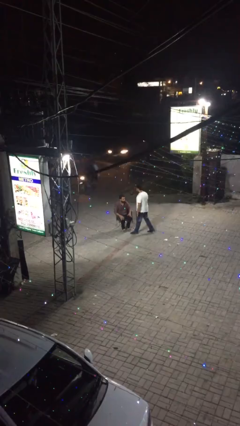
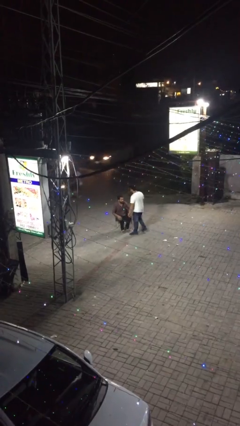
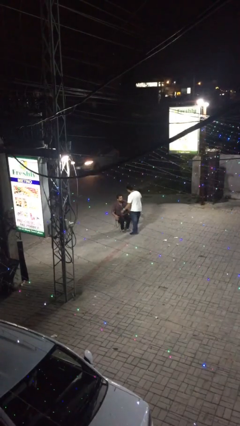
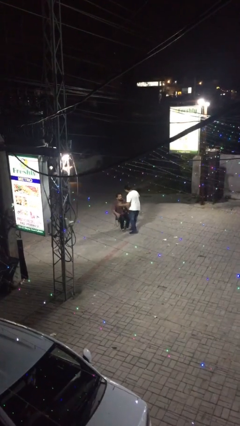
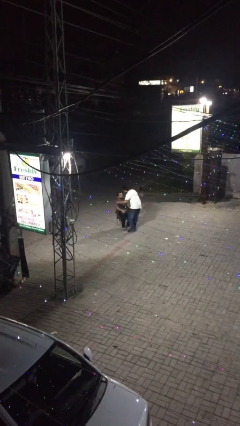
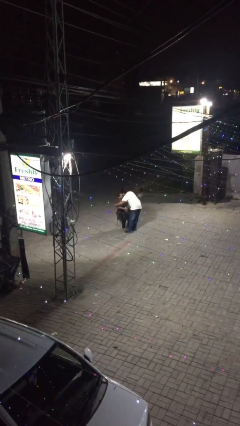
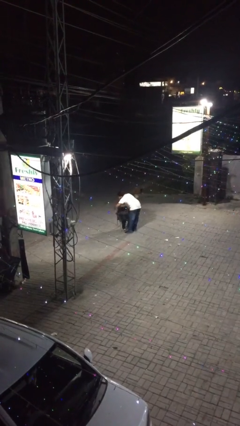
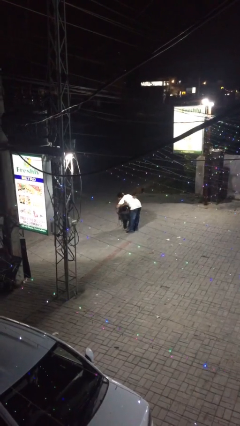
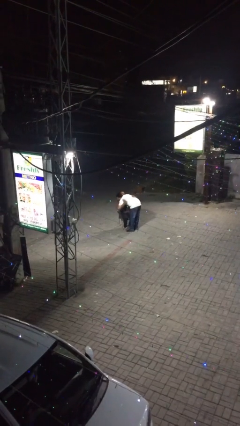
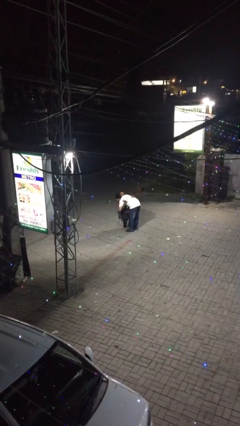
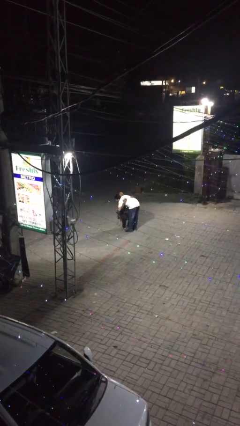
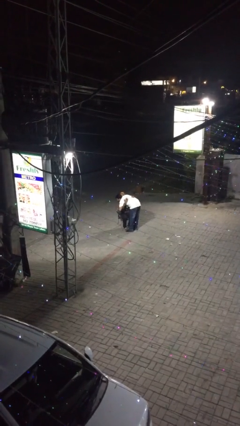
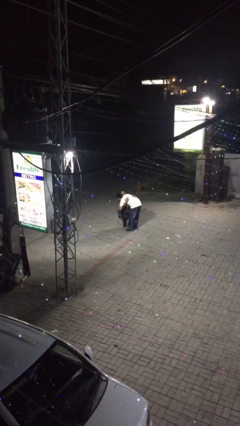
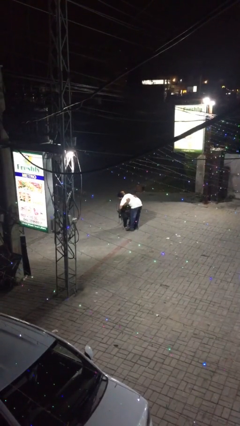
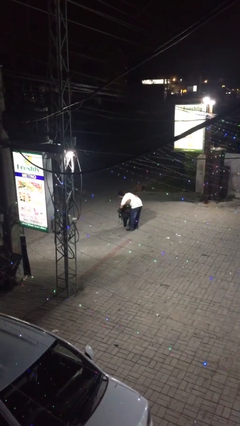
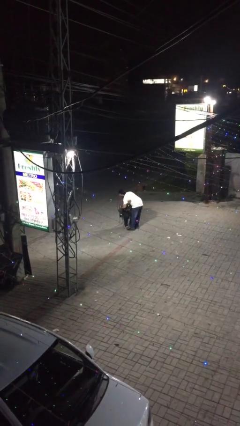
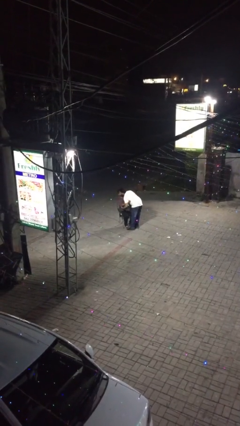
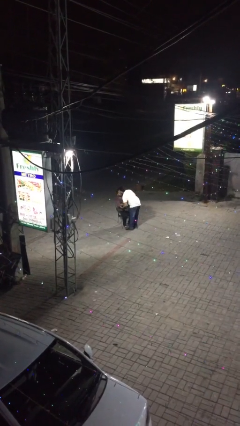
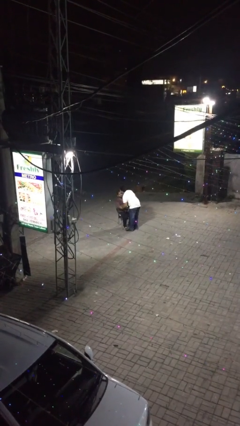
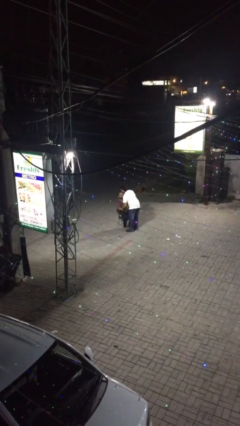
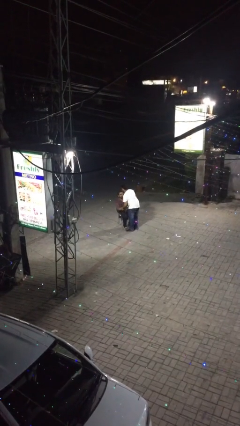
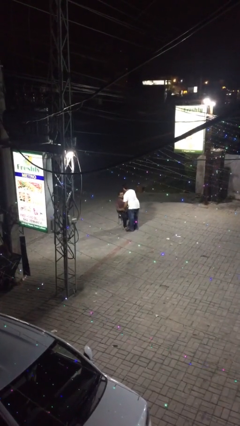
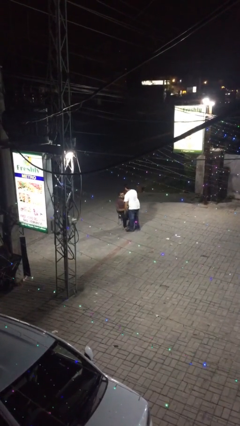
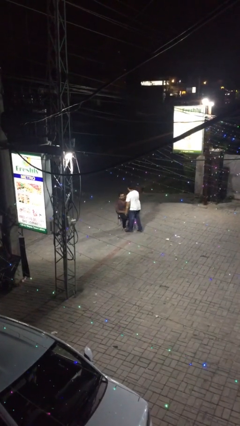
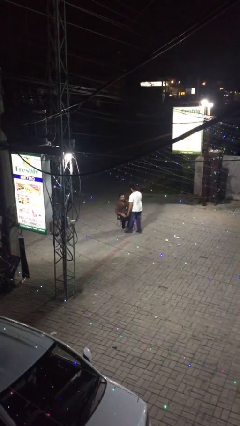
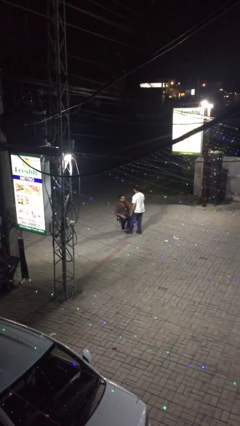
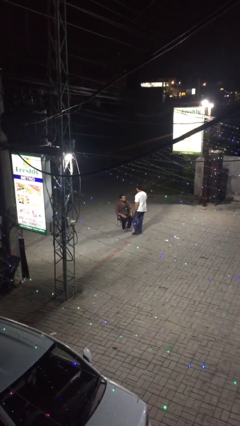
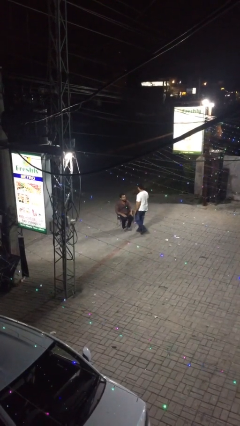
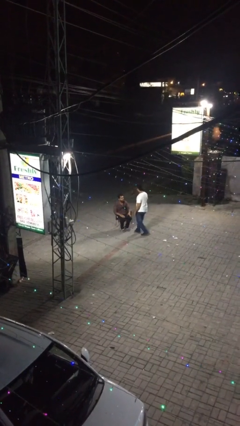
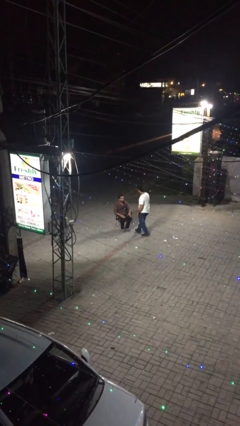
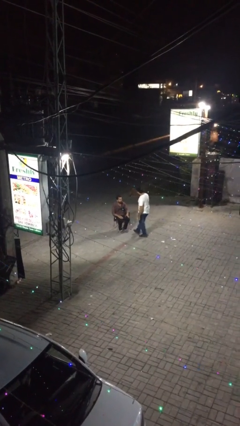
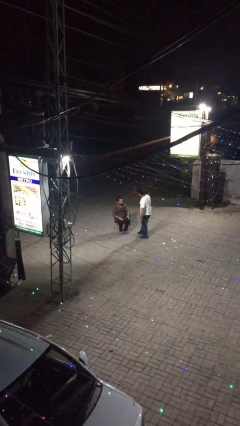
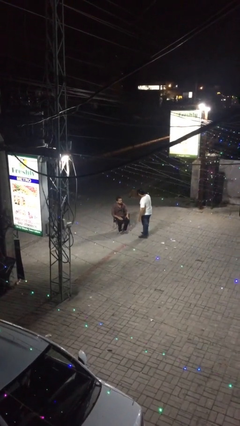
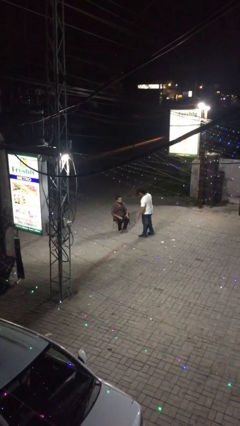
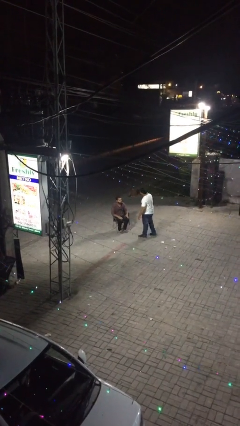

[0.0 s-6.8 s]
person embraces person

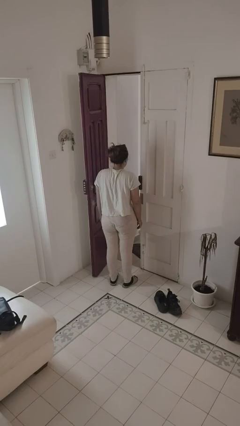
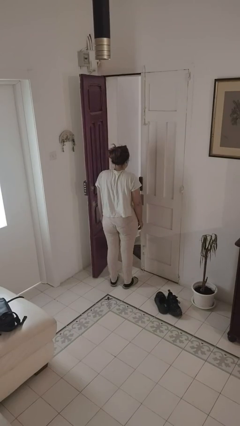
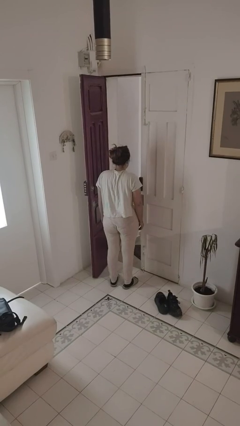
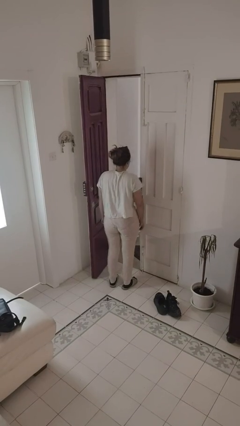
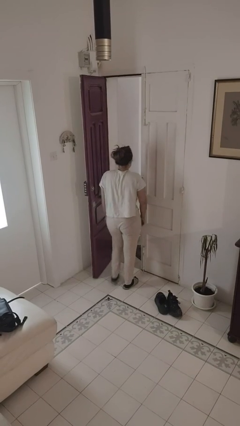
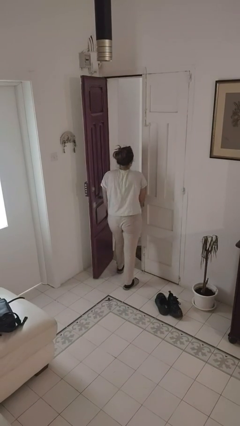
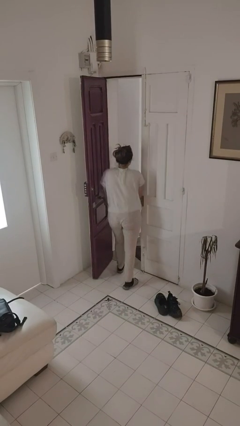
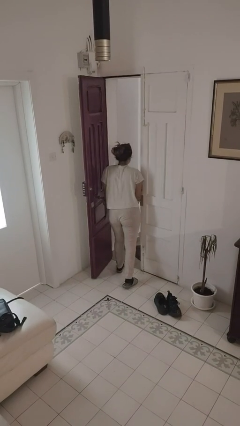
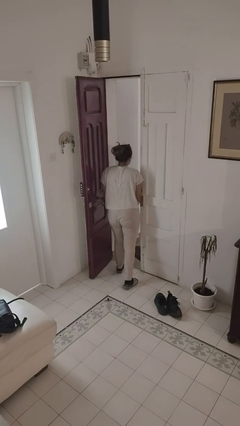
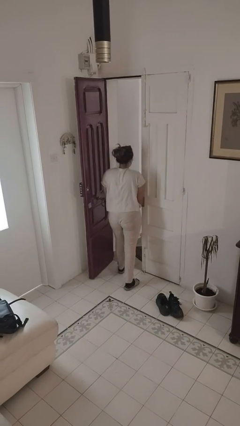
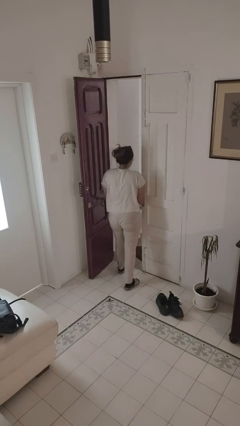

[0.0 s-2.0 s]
person bumps into wall

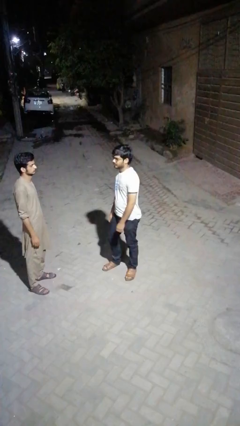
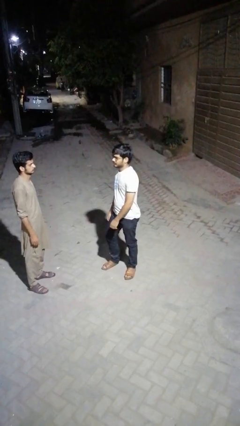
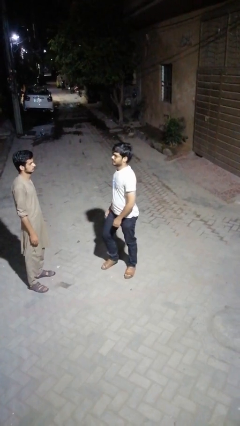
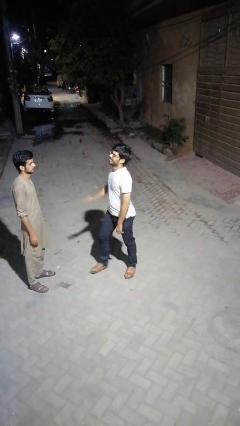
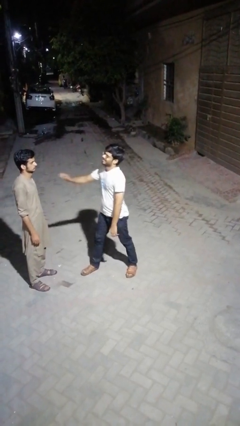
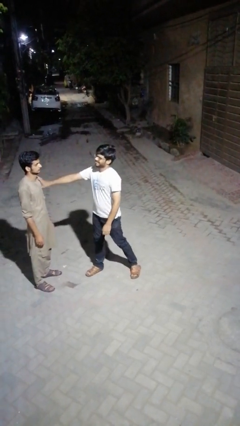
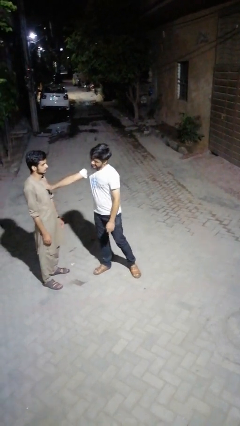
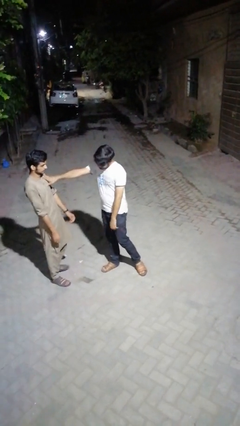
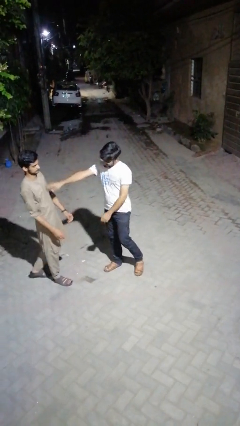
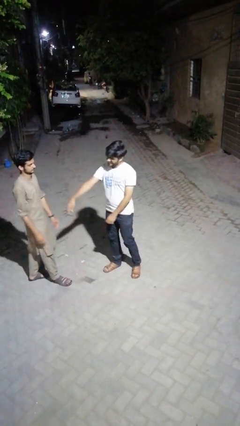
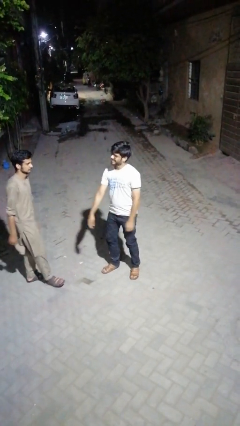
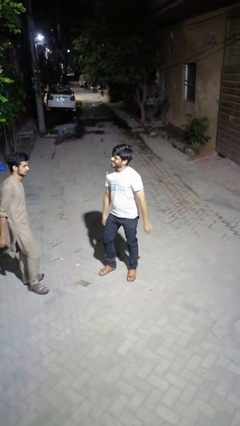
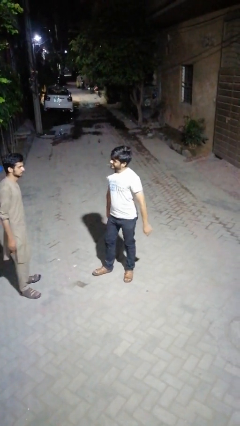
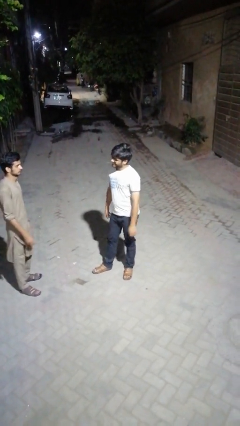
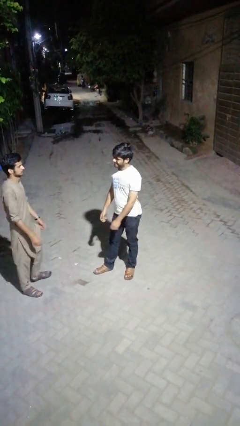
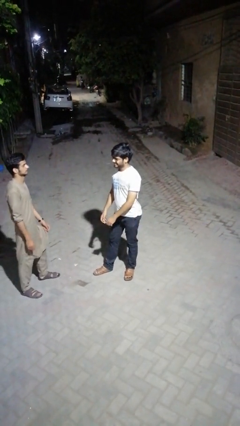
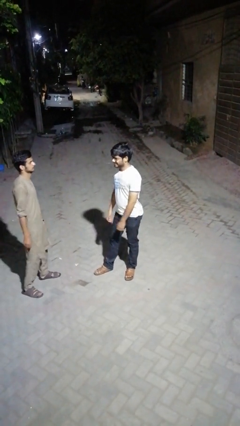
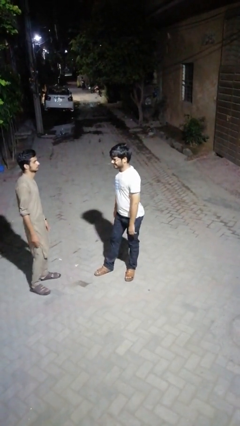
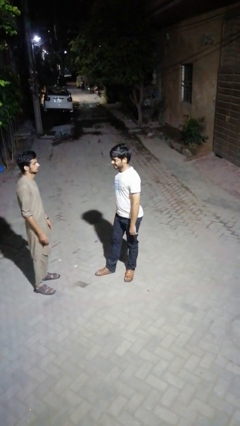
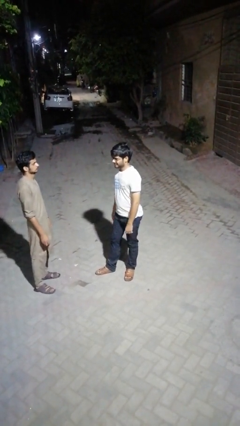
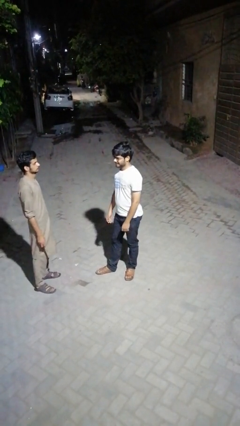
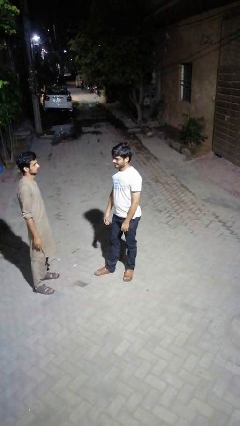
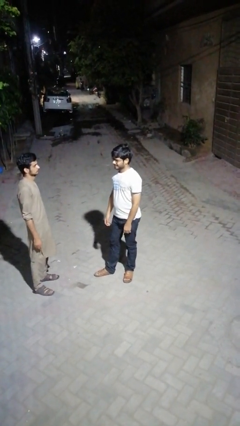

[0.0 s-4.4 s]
person shoves person

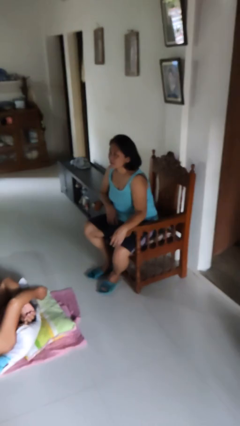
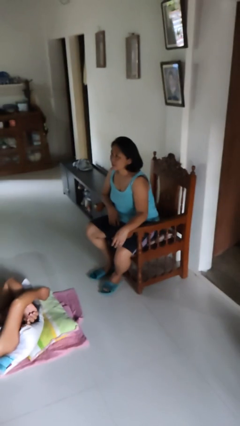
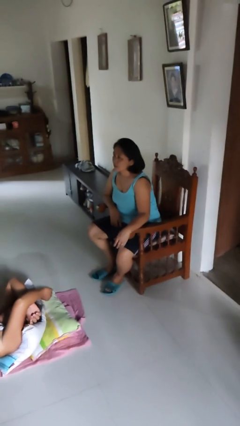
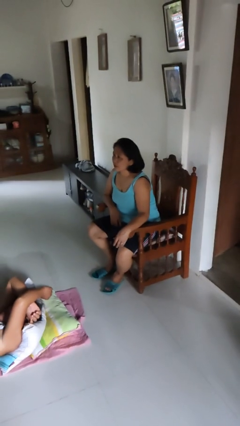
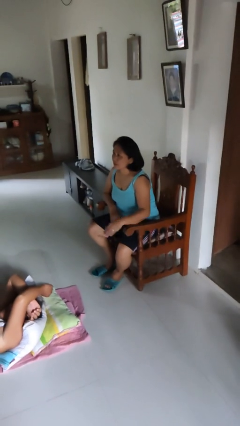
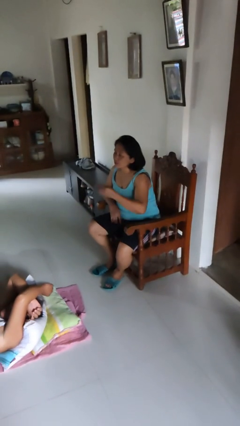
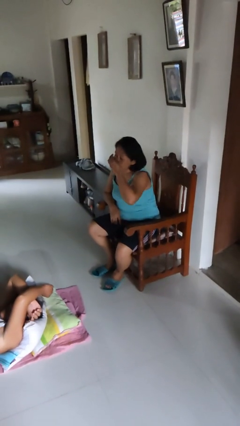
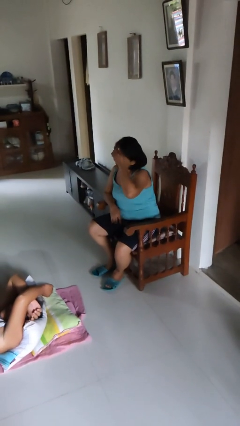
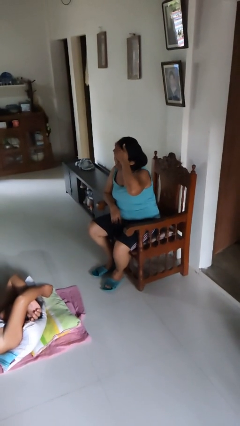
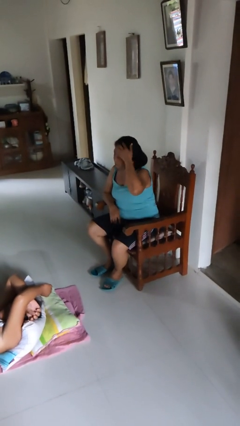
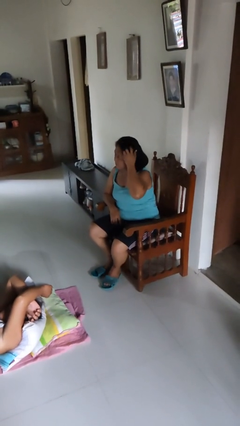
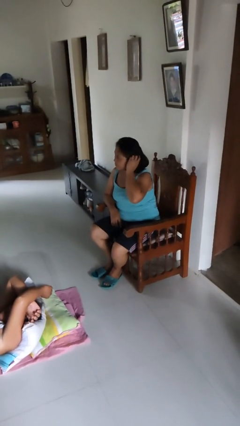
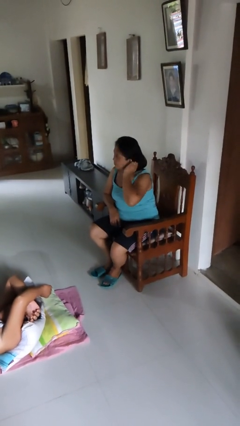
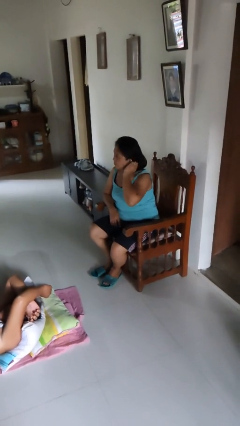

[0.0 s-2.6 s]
person strokes hair

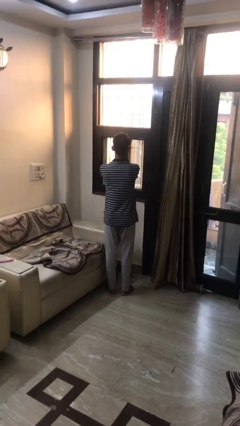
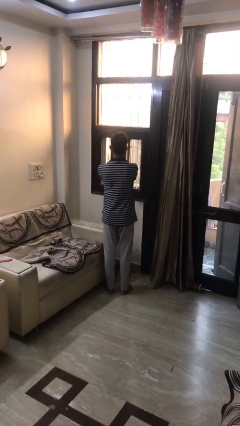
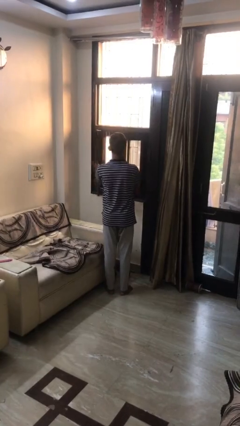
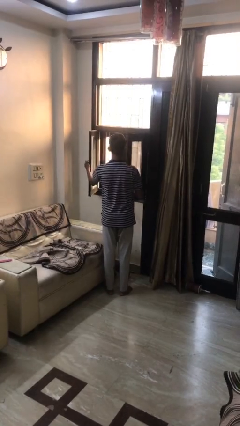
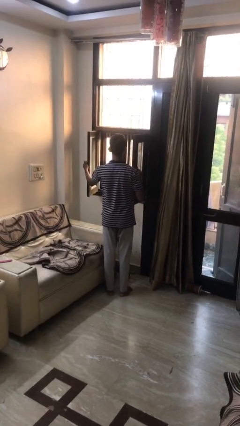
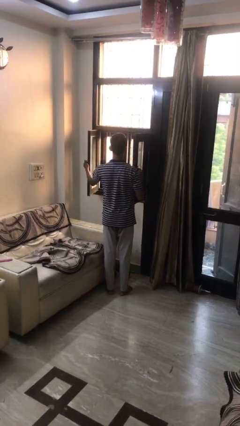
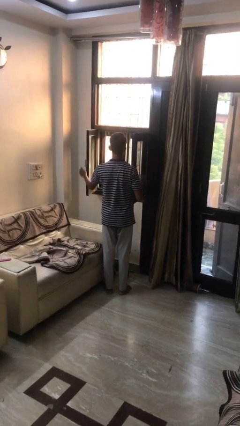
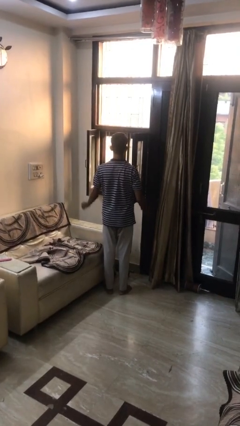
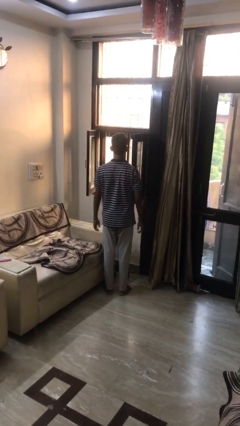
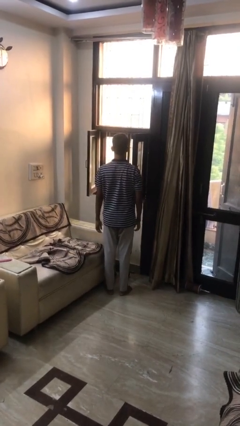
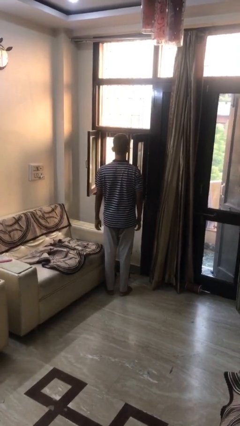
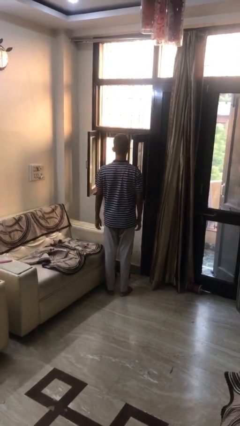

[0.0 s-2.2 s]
person opens home window
